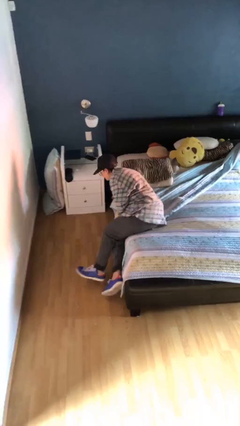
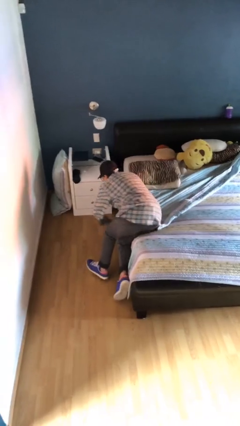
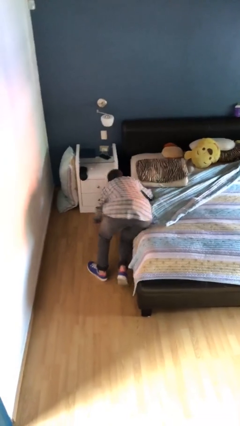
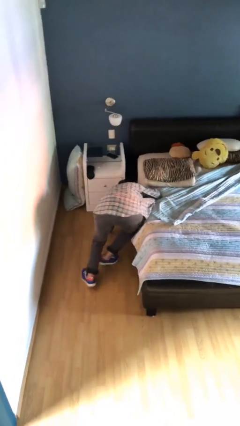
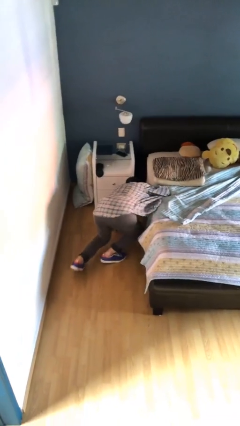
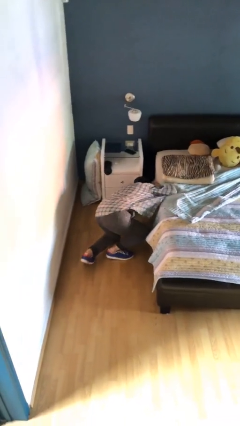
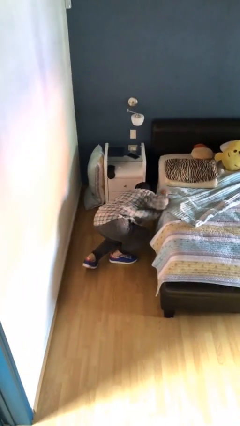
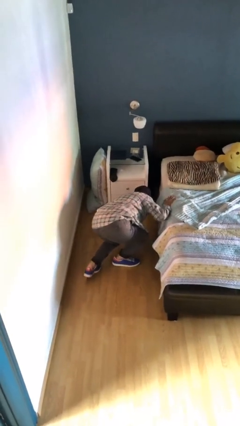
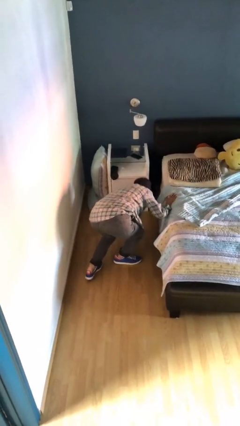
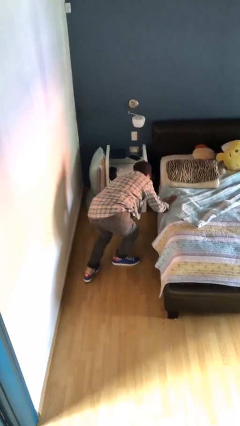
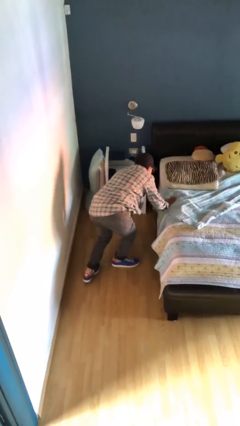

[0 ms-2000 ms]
person falls from bed

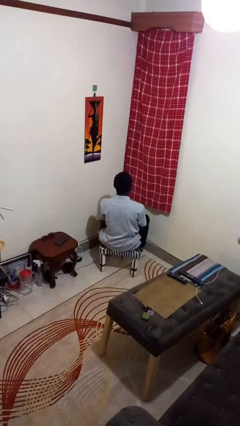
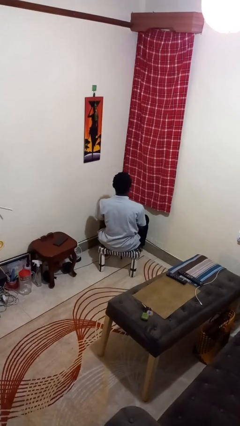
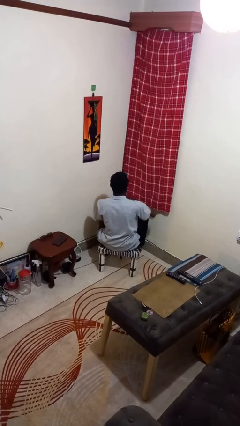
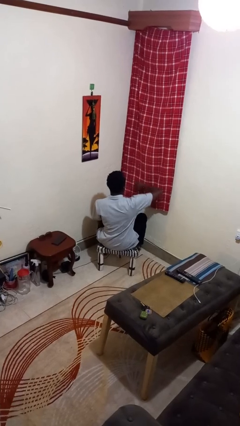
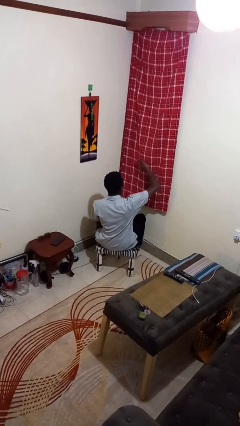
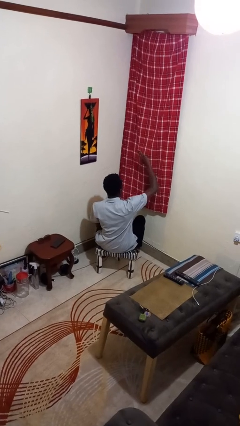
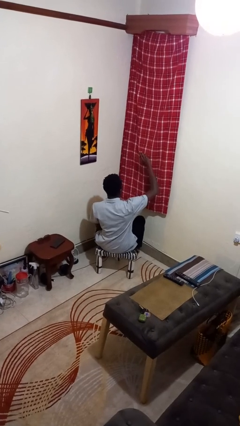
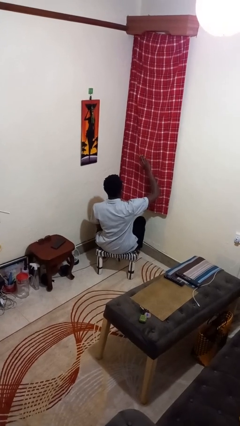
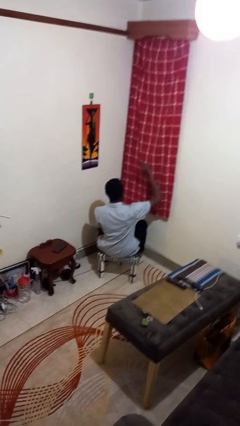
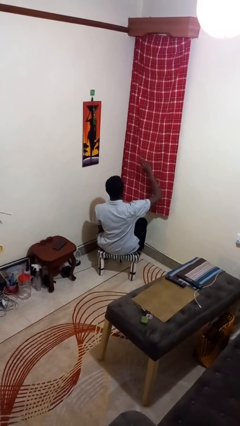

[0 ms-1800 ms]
person gestures swipe up

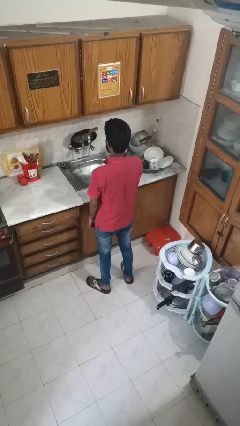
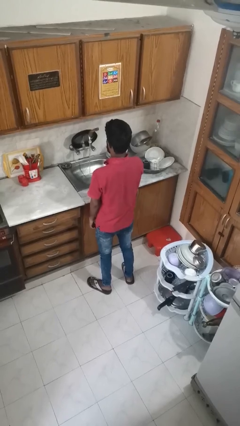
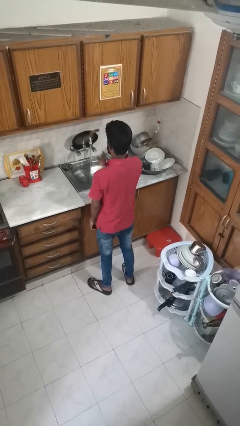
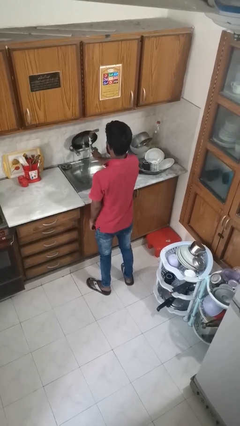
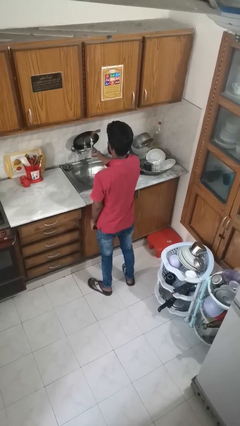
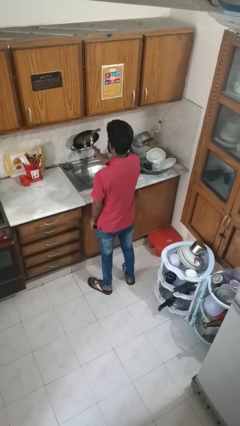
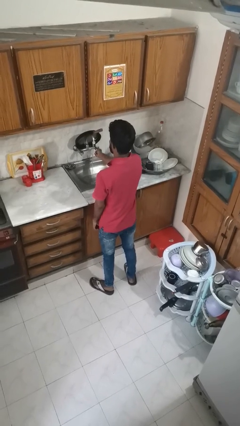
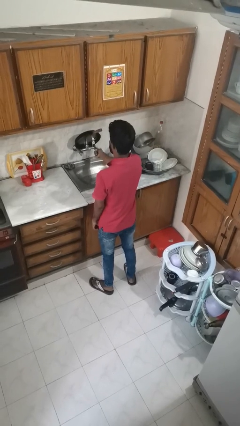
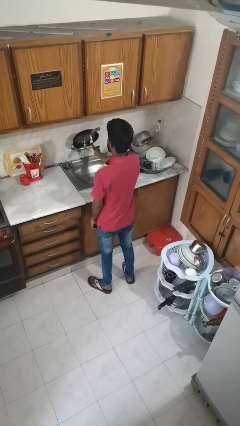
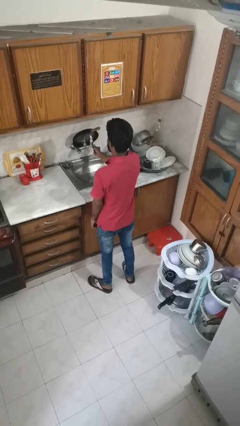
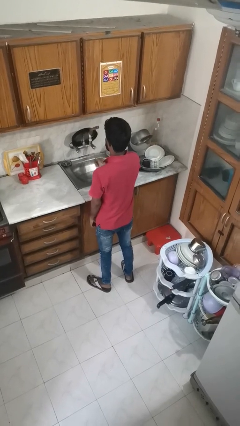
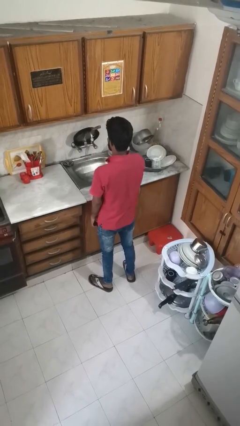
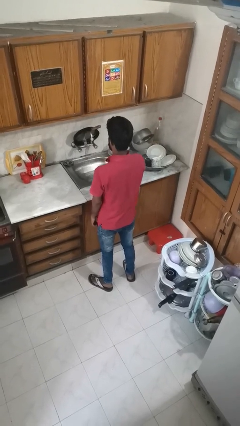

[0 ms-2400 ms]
person turns off faucet

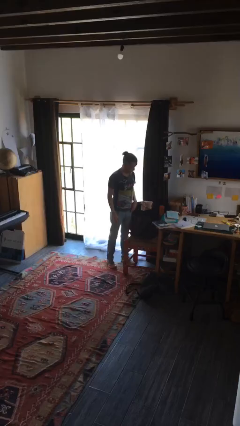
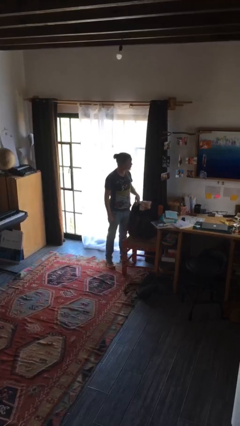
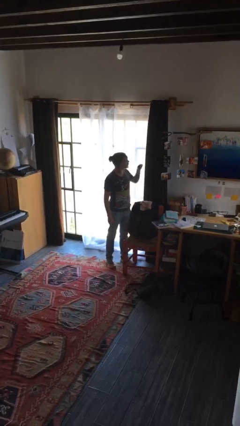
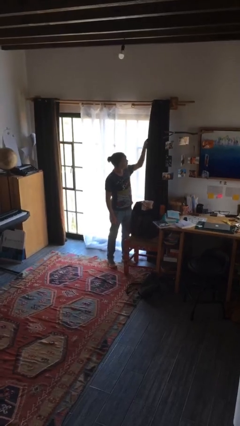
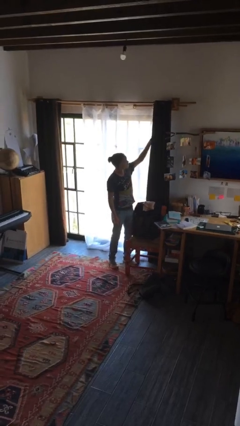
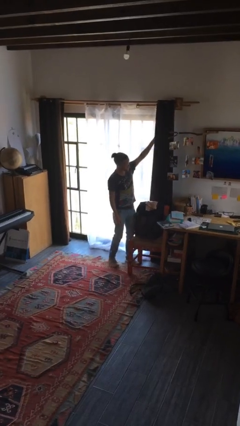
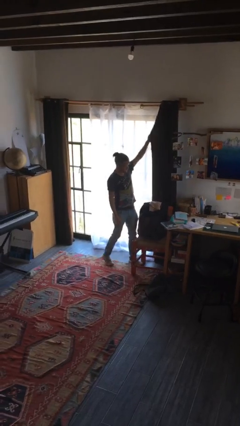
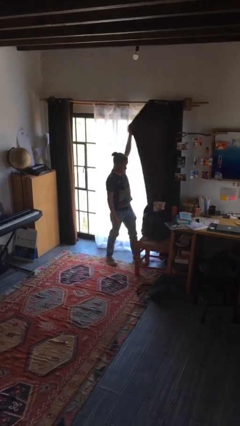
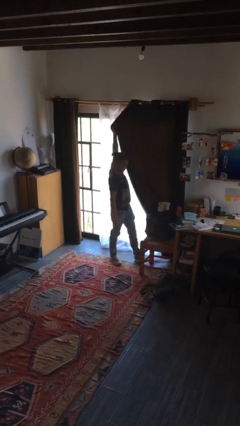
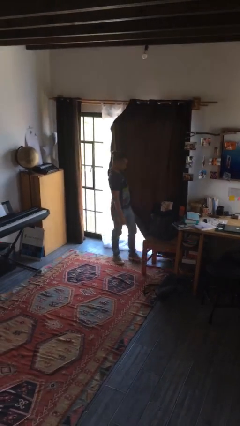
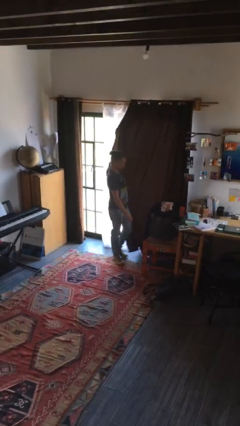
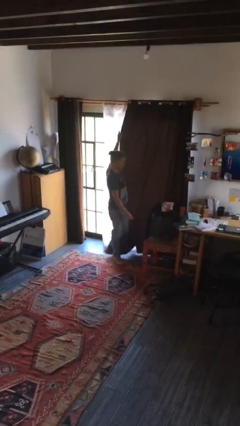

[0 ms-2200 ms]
person closes curtains

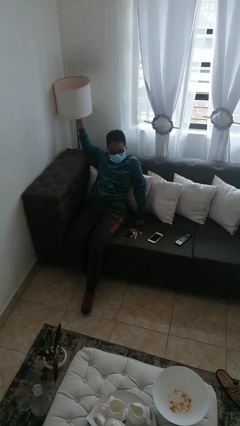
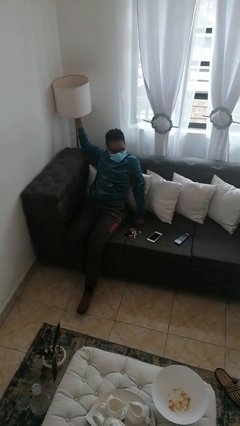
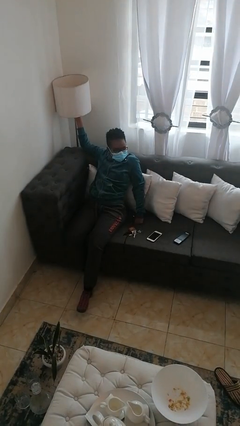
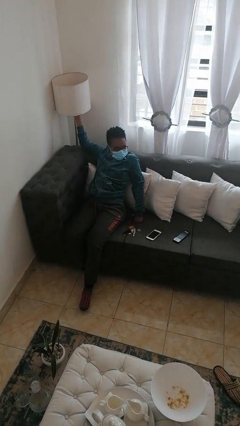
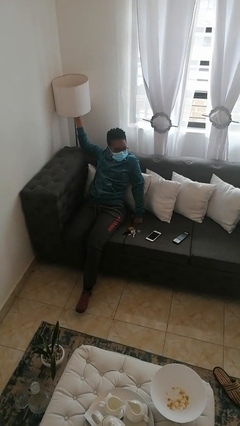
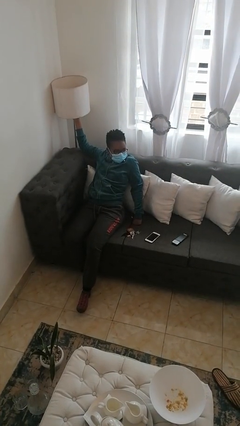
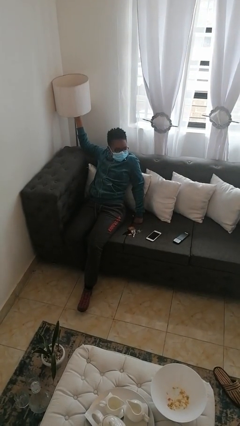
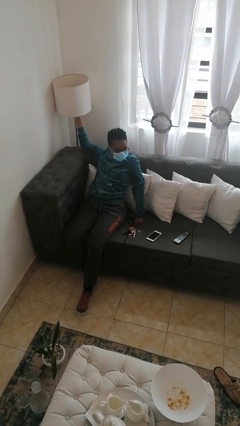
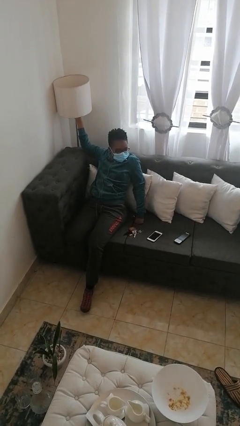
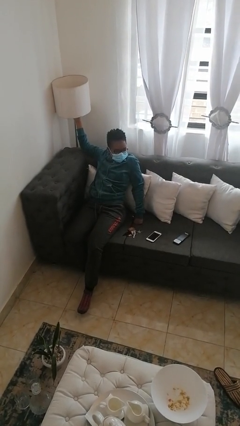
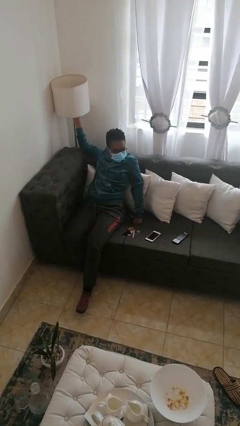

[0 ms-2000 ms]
person turns off lamp

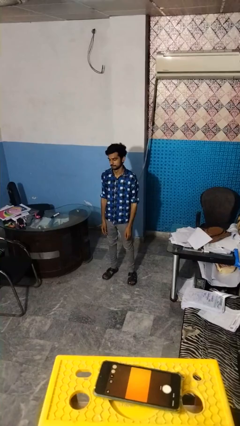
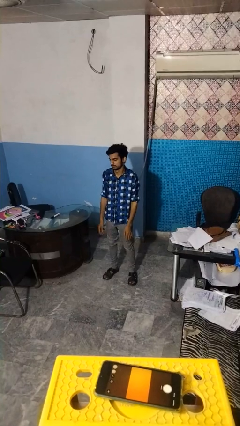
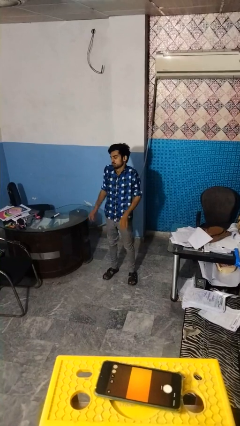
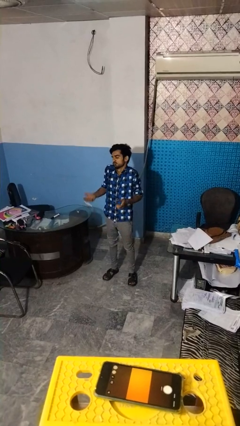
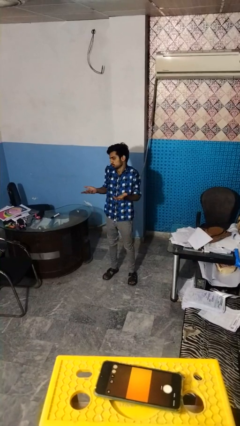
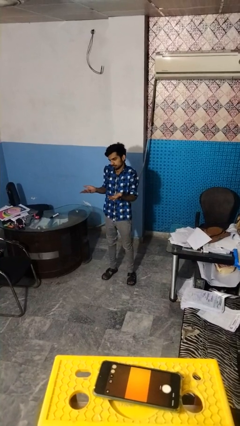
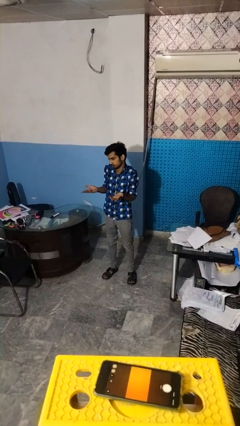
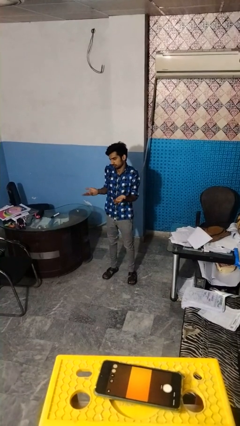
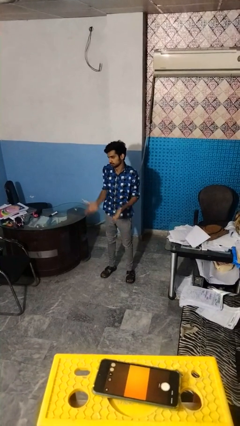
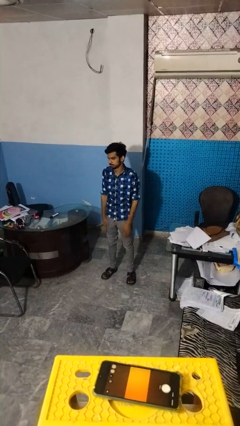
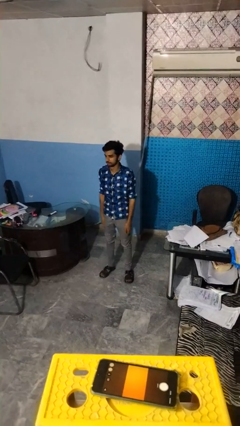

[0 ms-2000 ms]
person shrugs

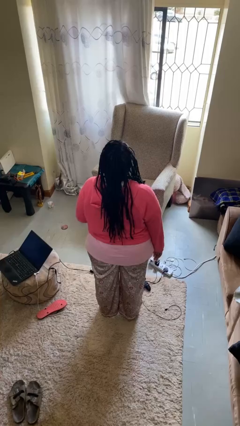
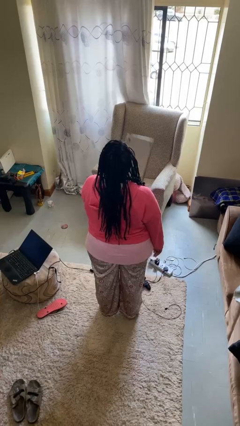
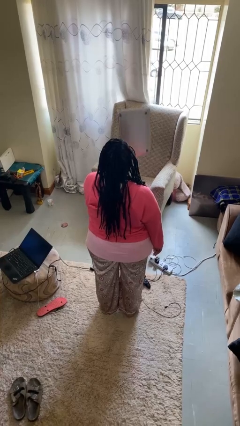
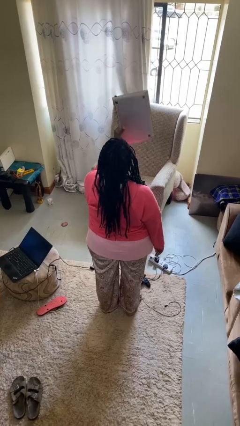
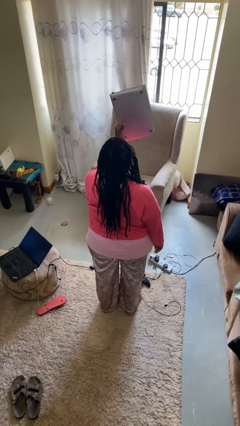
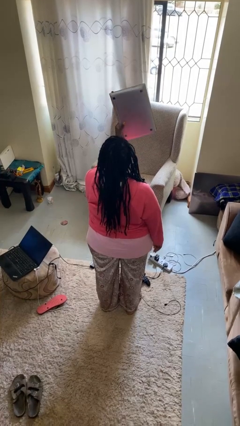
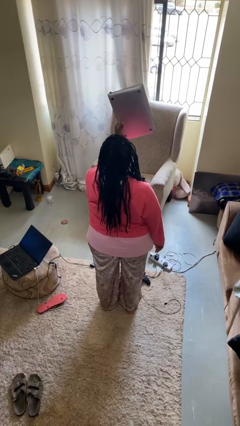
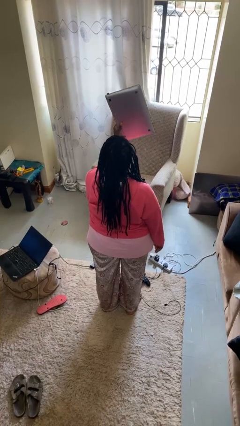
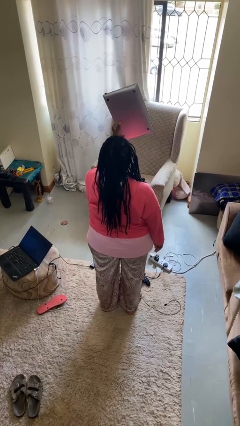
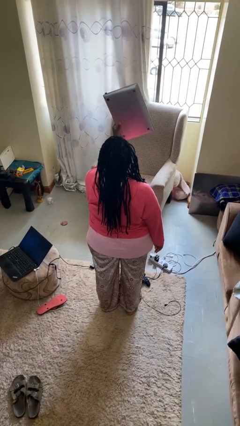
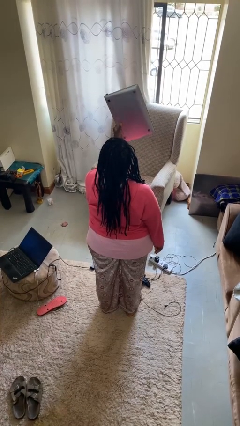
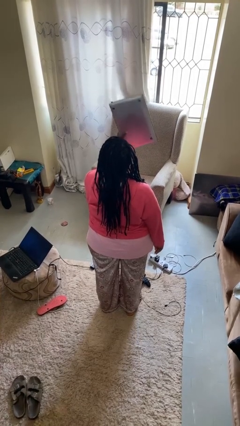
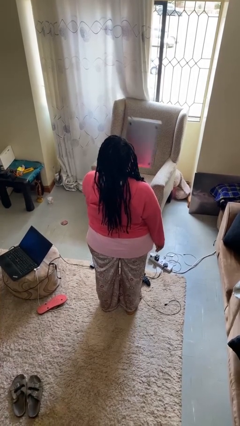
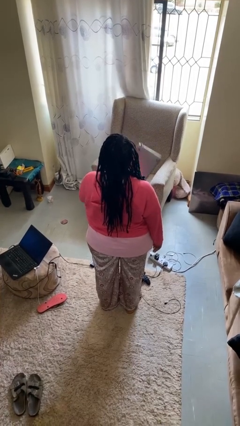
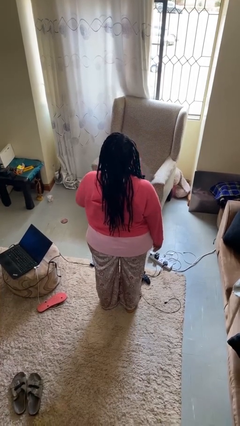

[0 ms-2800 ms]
person holds object above head

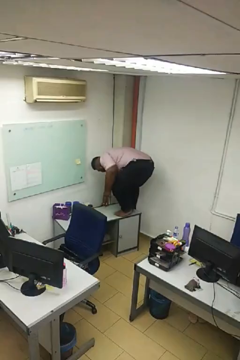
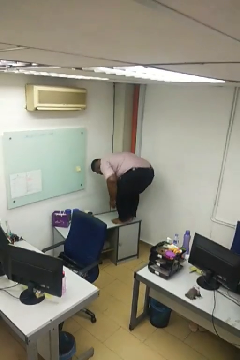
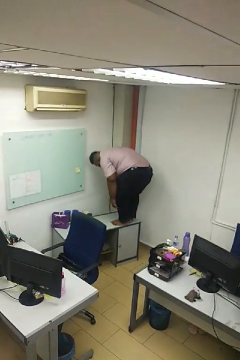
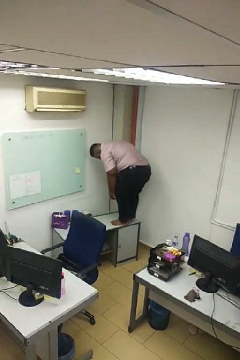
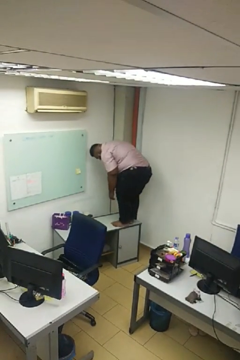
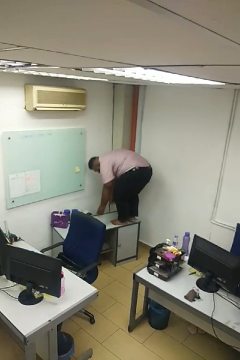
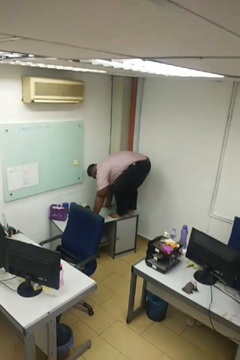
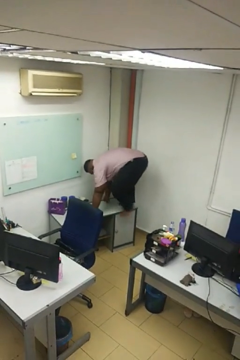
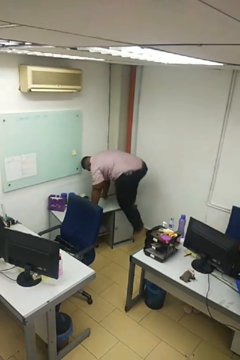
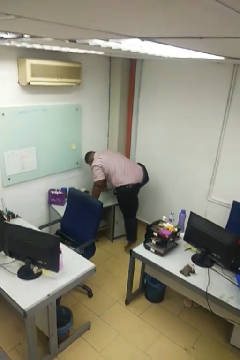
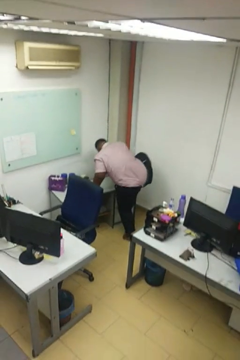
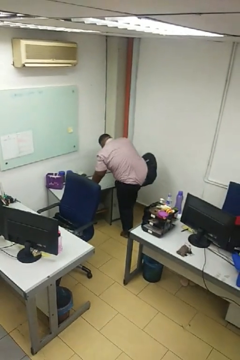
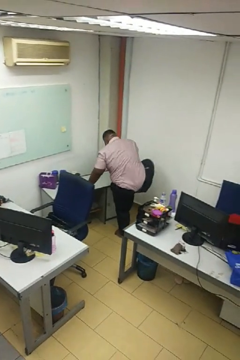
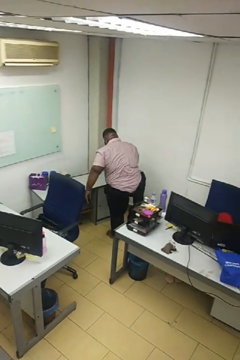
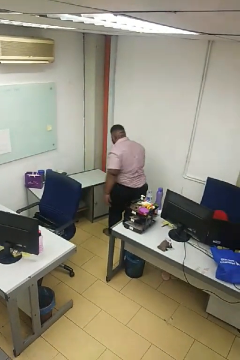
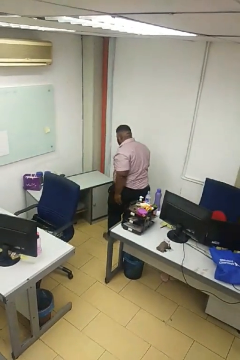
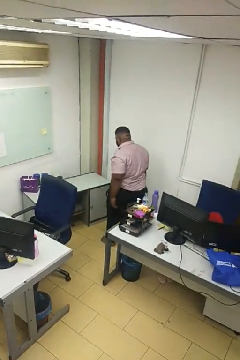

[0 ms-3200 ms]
person climbs off table
